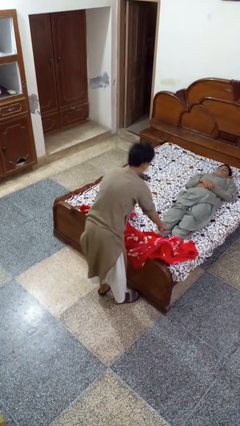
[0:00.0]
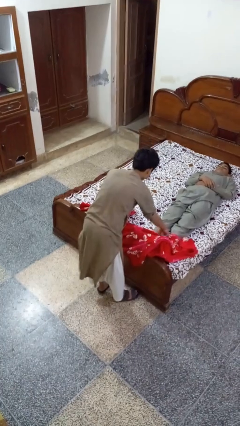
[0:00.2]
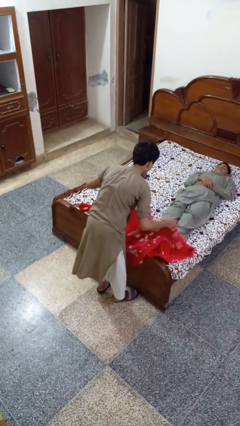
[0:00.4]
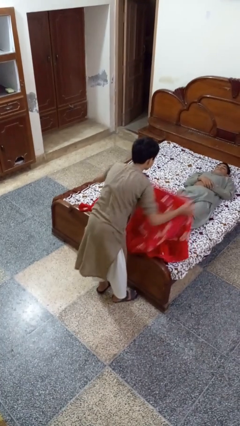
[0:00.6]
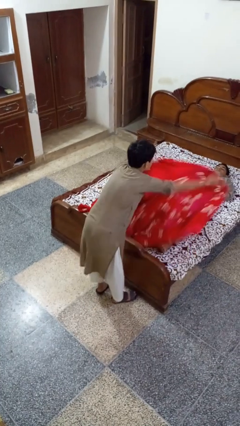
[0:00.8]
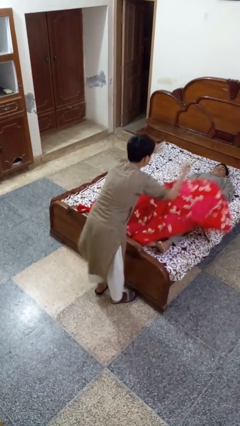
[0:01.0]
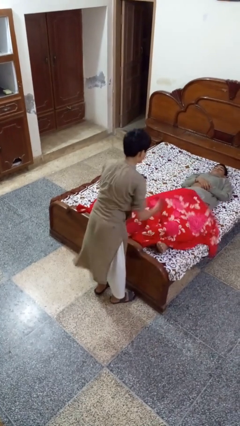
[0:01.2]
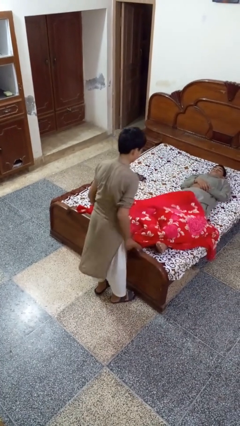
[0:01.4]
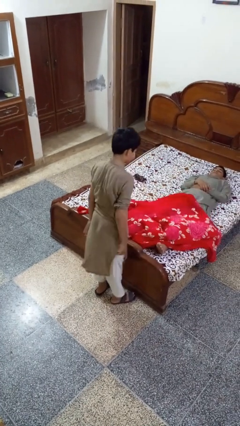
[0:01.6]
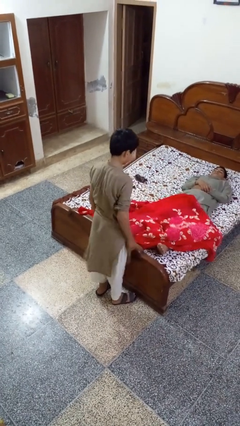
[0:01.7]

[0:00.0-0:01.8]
person covers friend with blanket

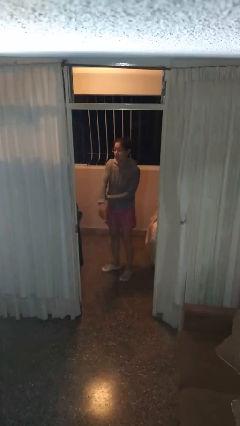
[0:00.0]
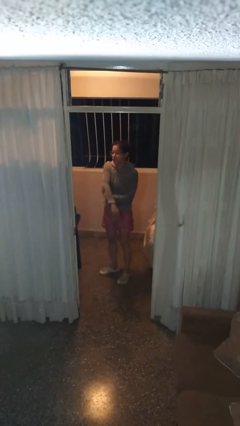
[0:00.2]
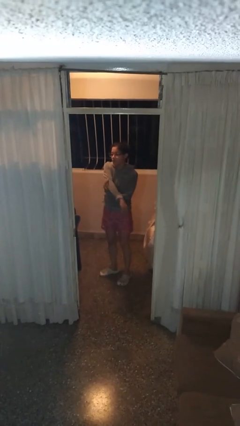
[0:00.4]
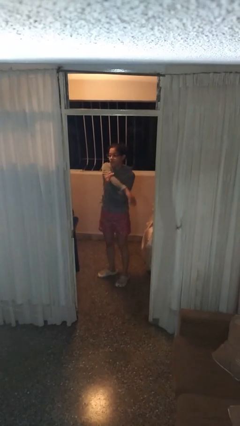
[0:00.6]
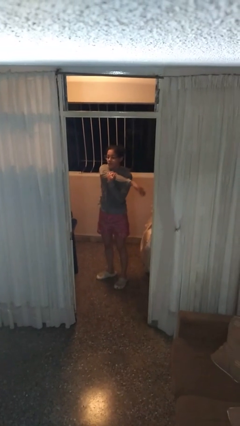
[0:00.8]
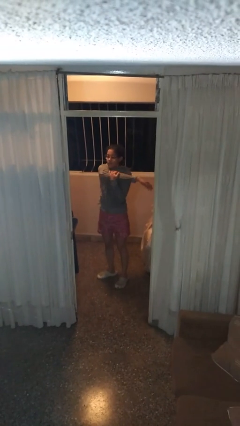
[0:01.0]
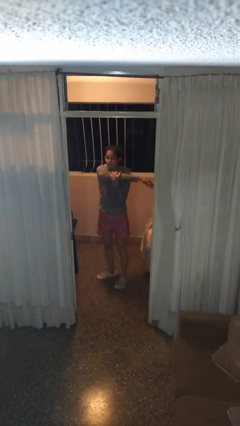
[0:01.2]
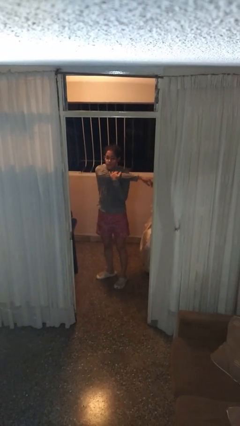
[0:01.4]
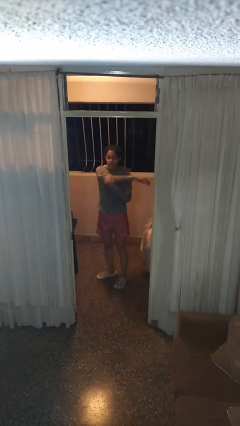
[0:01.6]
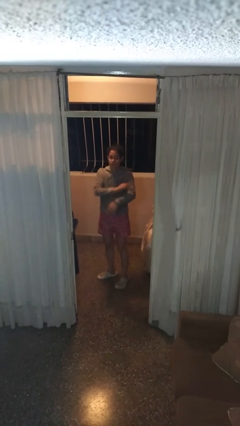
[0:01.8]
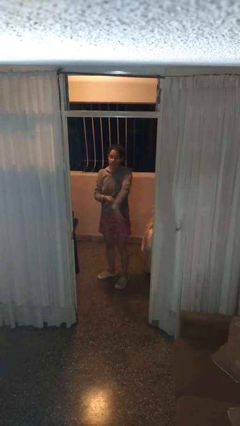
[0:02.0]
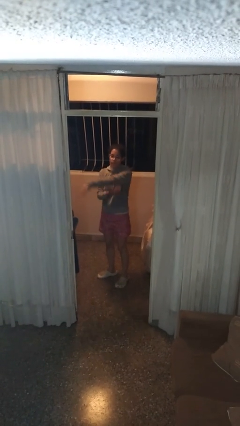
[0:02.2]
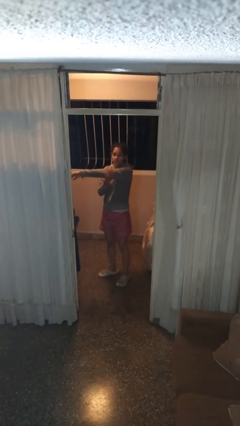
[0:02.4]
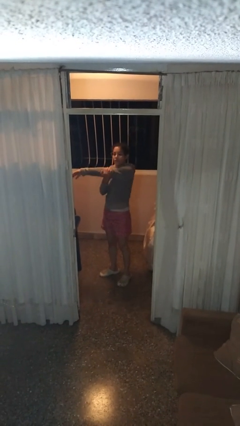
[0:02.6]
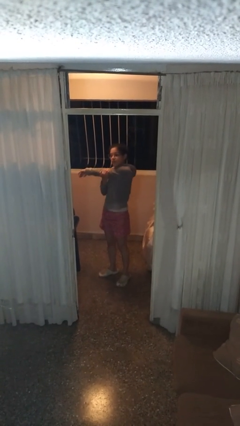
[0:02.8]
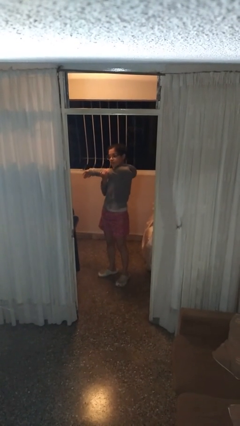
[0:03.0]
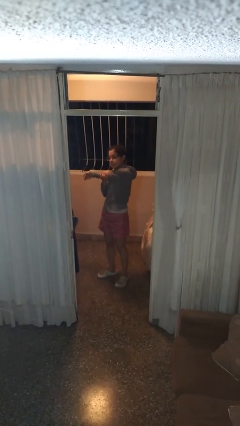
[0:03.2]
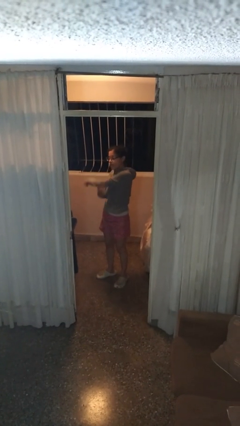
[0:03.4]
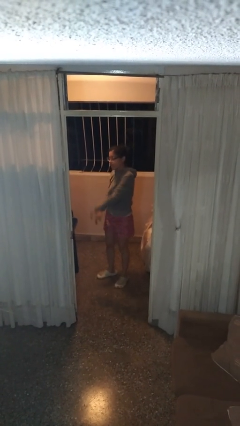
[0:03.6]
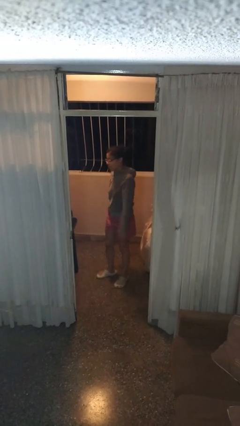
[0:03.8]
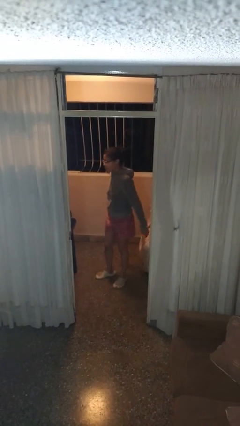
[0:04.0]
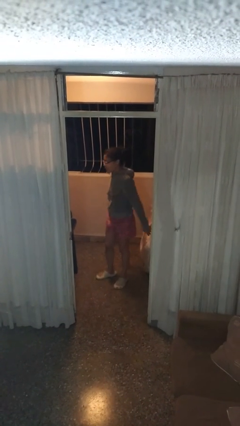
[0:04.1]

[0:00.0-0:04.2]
person stretches arms to side

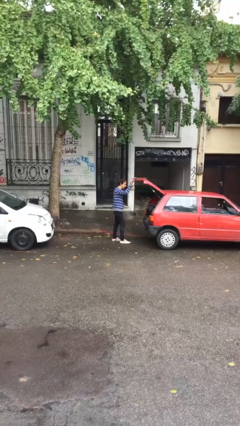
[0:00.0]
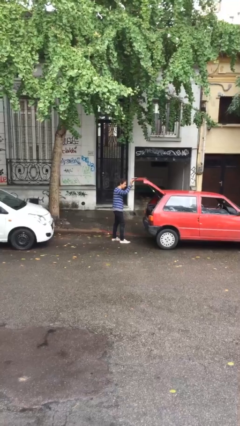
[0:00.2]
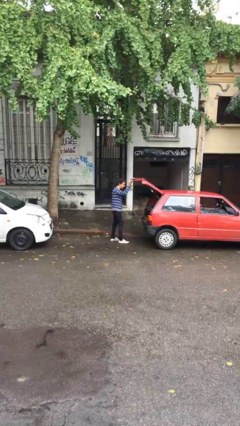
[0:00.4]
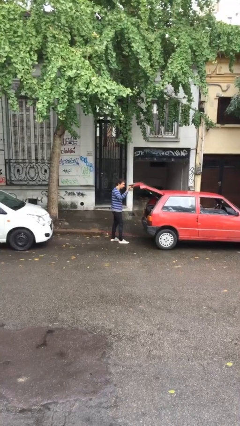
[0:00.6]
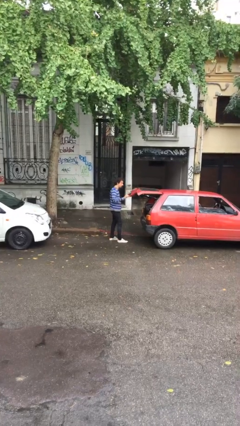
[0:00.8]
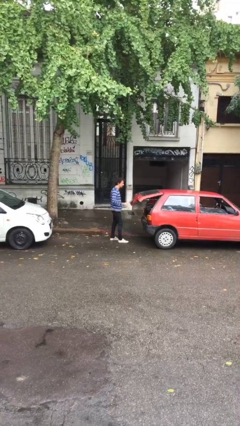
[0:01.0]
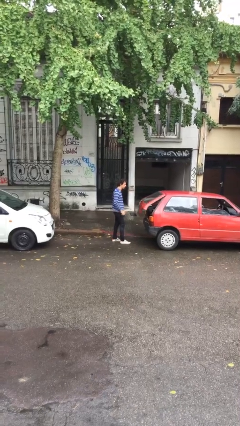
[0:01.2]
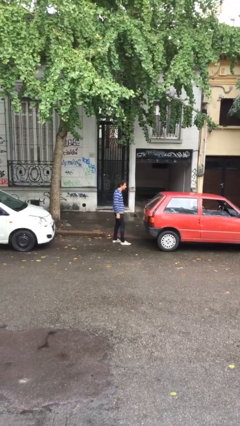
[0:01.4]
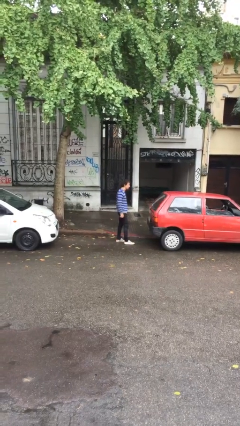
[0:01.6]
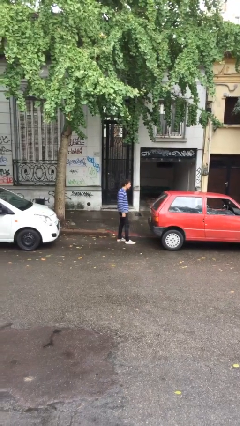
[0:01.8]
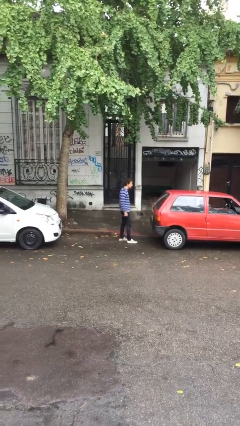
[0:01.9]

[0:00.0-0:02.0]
person closes car trunk

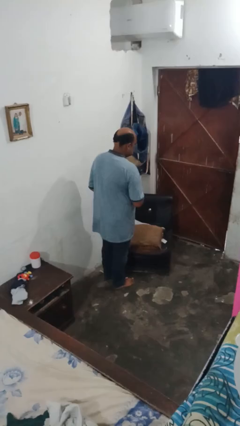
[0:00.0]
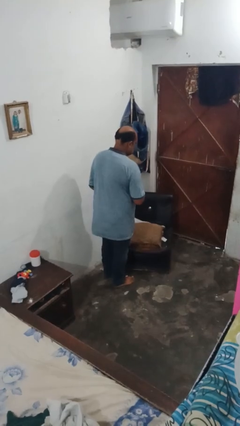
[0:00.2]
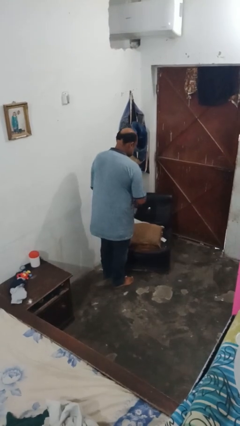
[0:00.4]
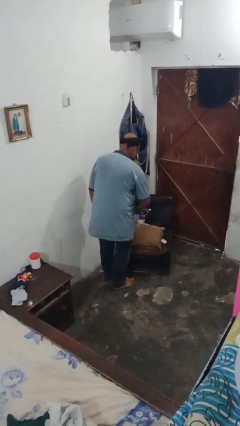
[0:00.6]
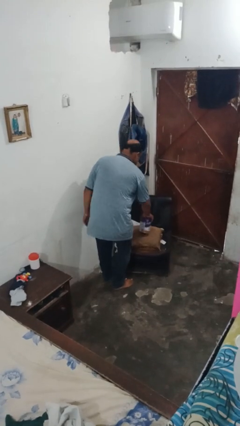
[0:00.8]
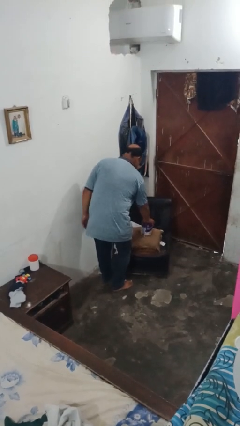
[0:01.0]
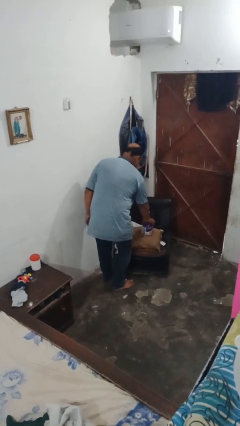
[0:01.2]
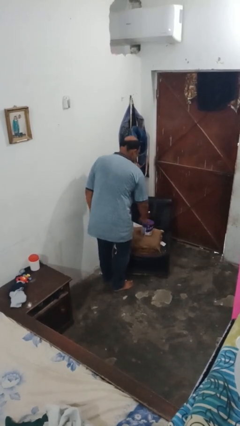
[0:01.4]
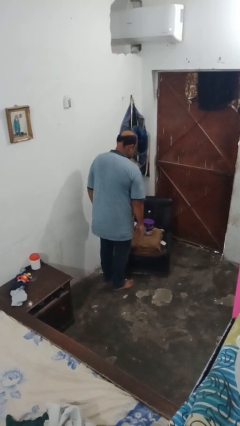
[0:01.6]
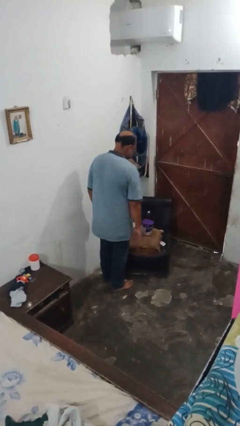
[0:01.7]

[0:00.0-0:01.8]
person puts down object on couch

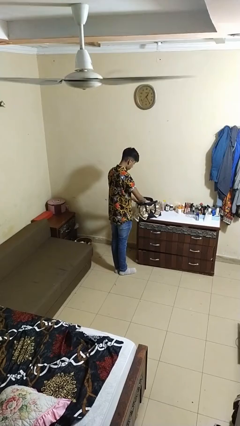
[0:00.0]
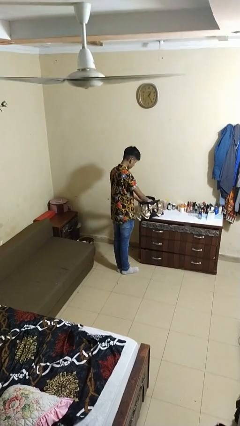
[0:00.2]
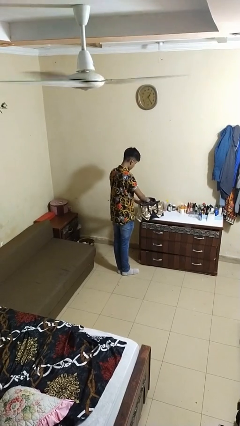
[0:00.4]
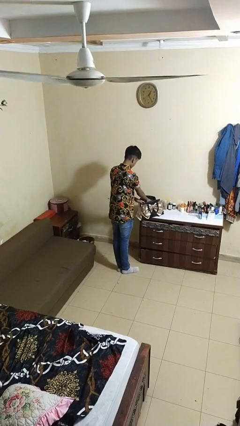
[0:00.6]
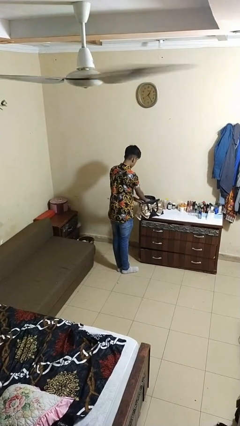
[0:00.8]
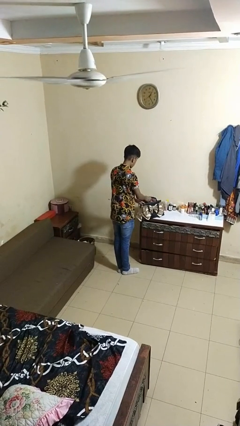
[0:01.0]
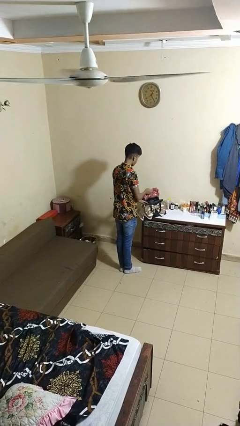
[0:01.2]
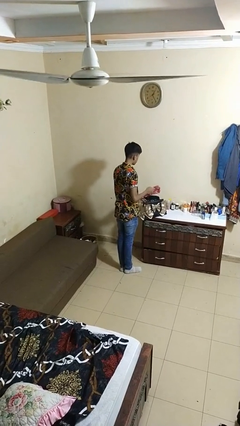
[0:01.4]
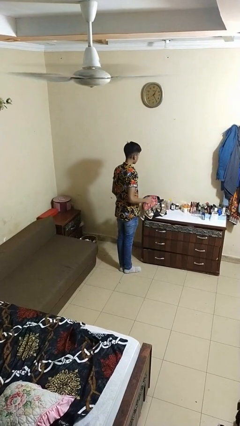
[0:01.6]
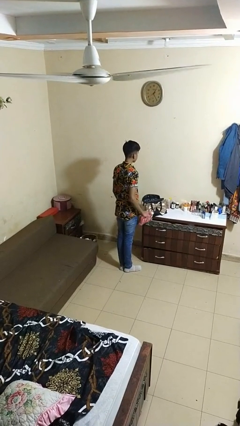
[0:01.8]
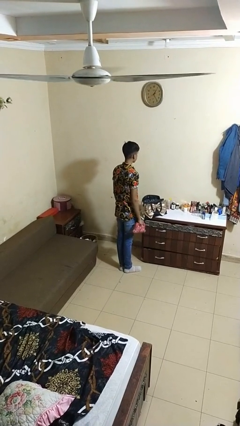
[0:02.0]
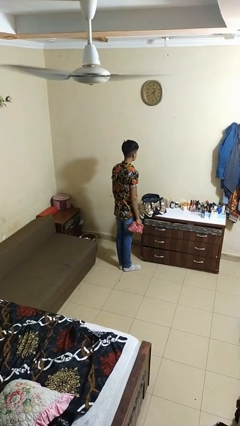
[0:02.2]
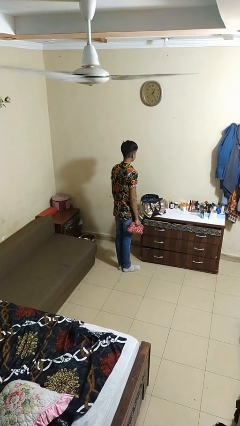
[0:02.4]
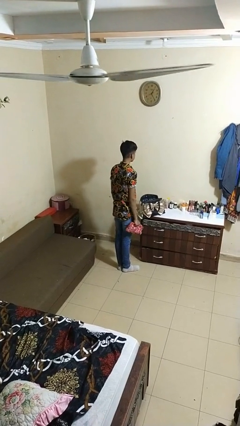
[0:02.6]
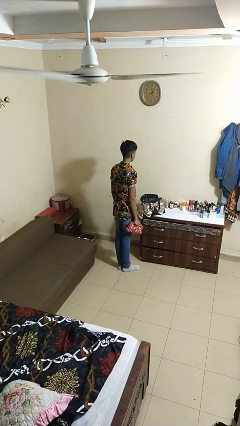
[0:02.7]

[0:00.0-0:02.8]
person takes object from purse

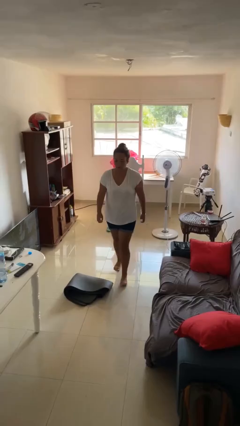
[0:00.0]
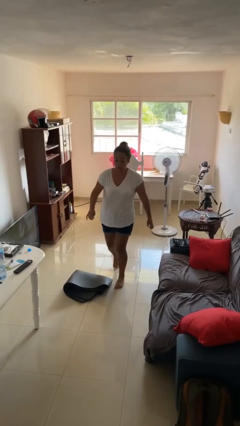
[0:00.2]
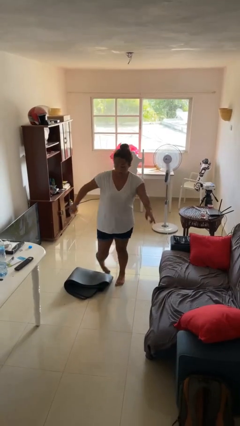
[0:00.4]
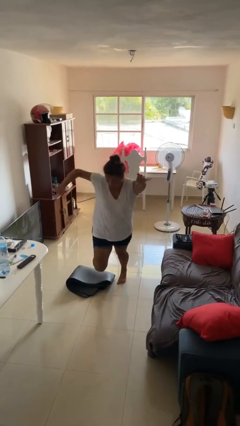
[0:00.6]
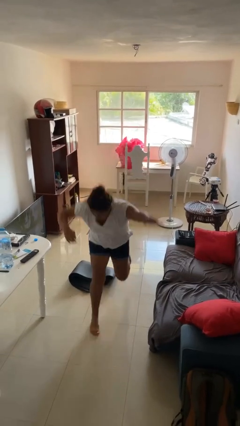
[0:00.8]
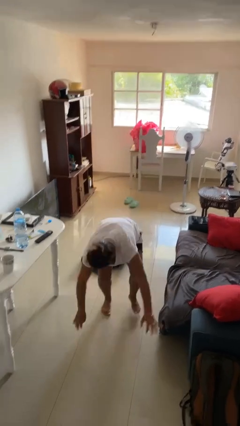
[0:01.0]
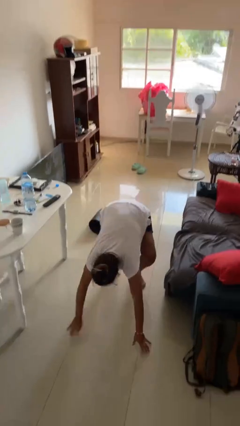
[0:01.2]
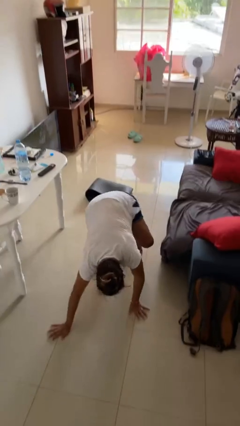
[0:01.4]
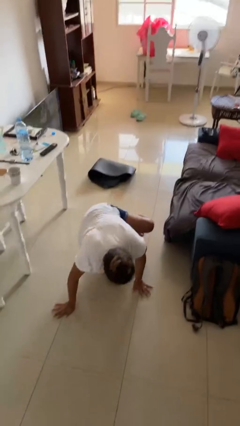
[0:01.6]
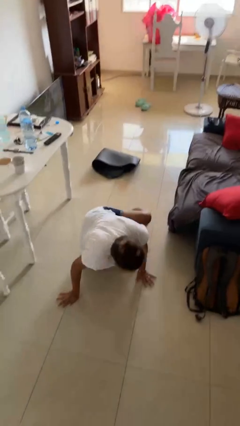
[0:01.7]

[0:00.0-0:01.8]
person trips on object on floor

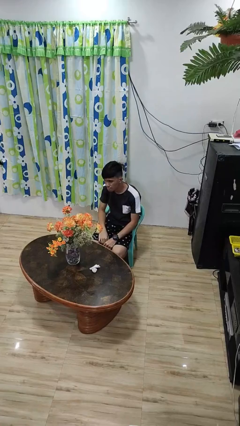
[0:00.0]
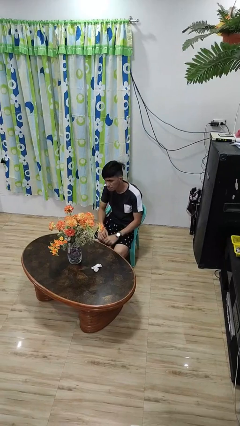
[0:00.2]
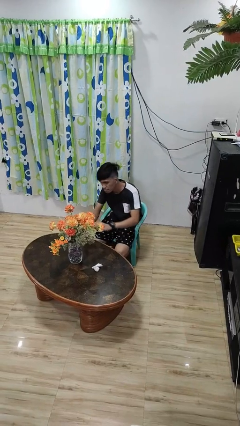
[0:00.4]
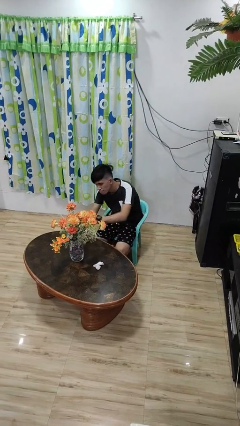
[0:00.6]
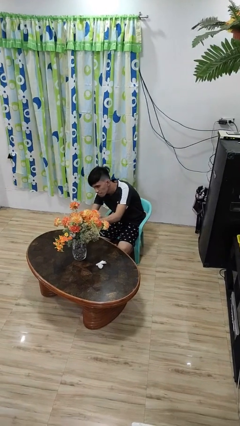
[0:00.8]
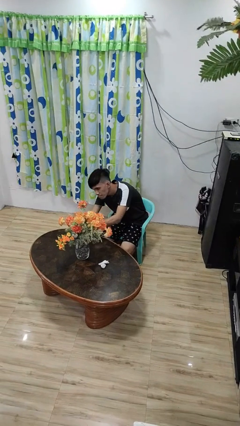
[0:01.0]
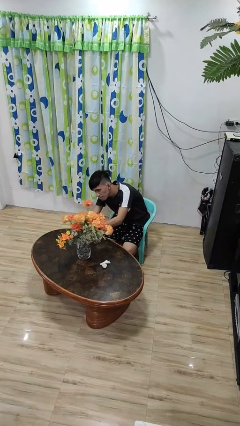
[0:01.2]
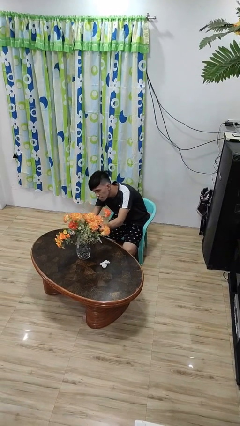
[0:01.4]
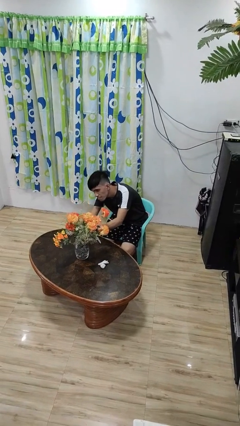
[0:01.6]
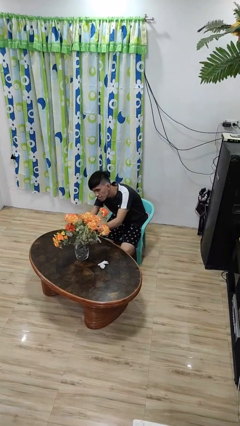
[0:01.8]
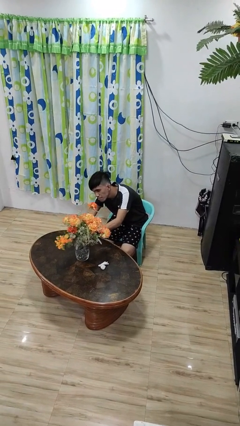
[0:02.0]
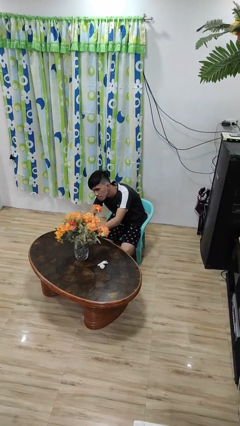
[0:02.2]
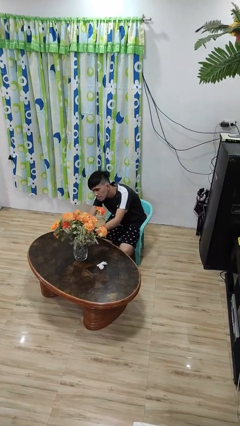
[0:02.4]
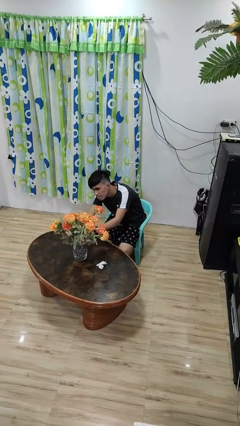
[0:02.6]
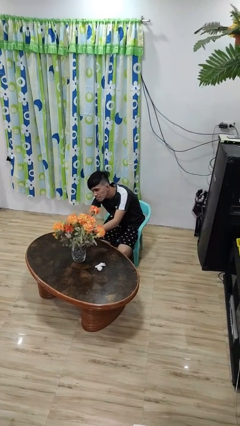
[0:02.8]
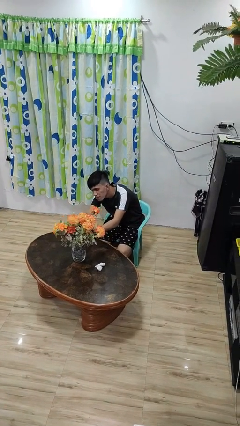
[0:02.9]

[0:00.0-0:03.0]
person arranges flowers in vase
